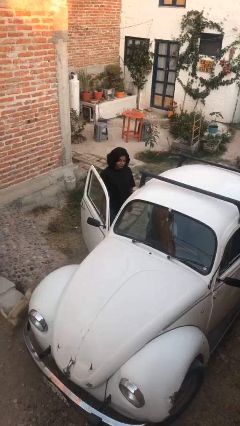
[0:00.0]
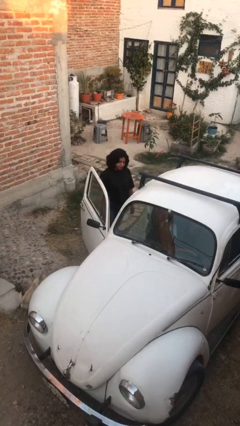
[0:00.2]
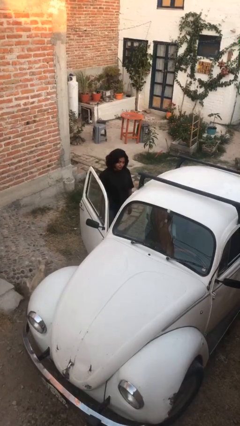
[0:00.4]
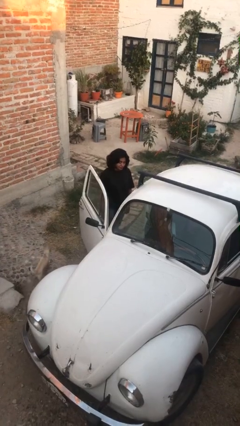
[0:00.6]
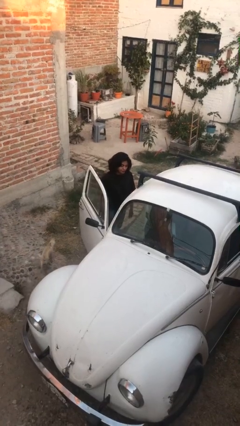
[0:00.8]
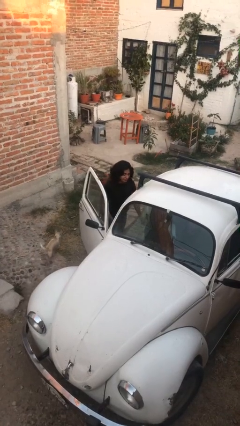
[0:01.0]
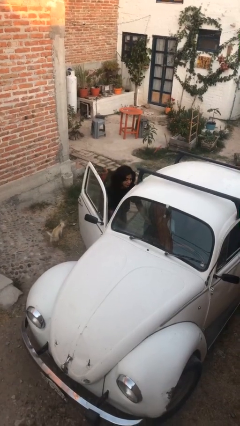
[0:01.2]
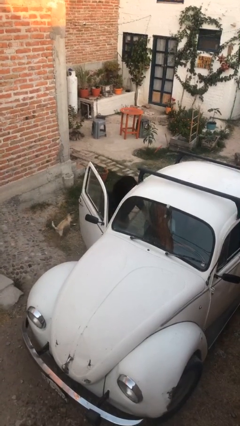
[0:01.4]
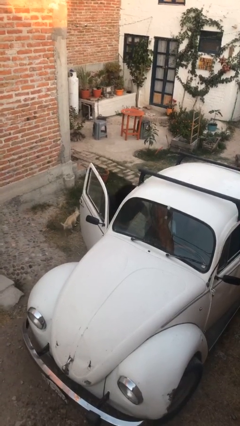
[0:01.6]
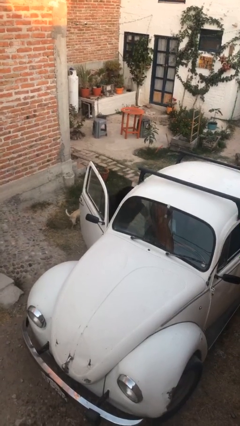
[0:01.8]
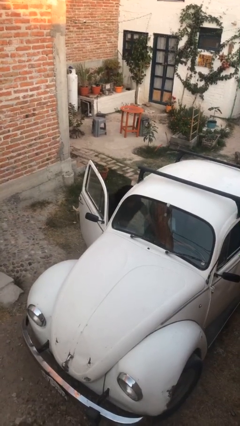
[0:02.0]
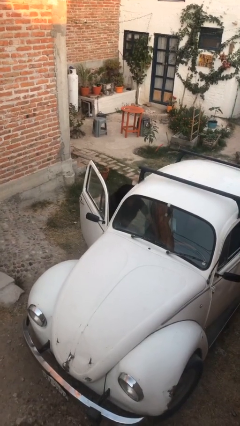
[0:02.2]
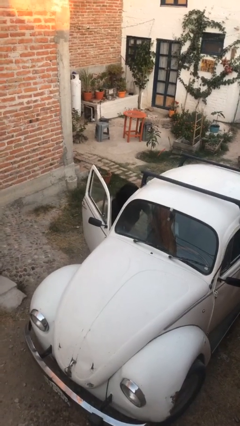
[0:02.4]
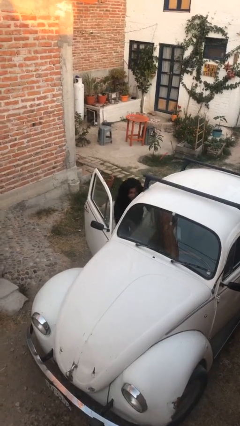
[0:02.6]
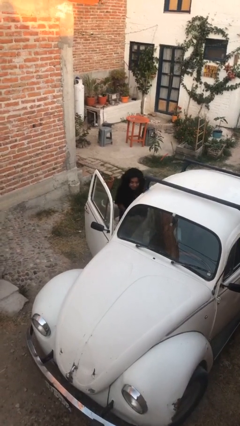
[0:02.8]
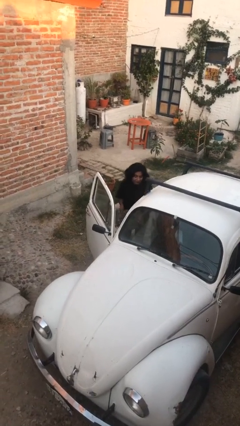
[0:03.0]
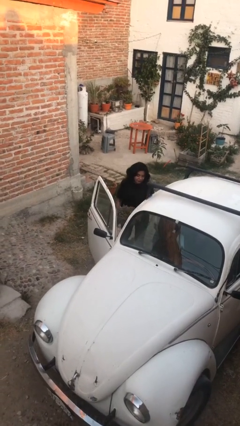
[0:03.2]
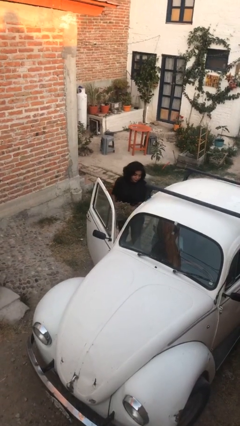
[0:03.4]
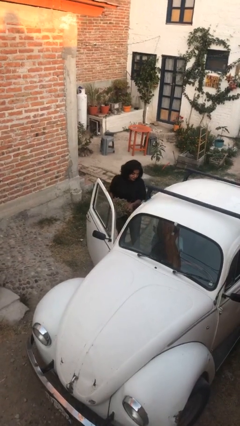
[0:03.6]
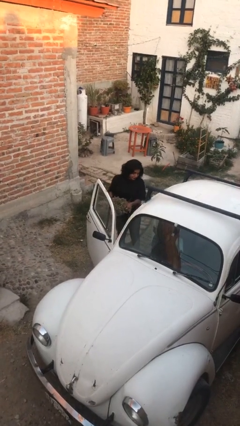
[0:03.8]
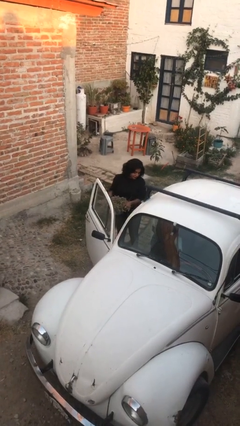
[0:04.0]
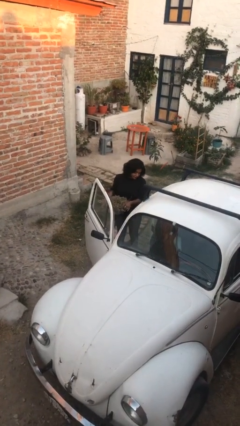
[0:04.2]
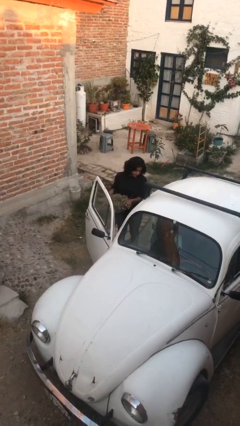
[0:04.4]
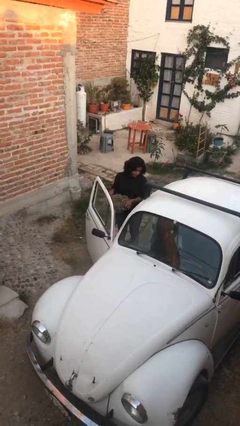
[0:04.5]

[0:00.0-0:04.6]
person unloads car

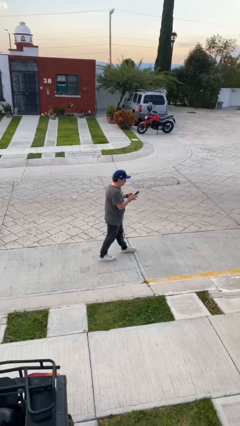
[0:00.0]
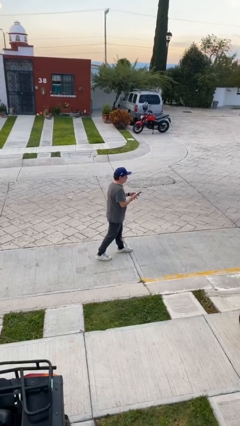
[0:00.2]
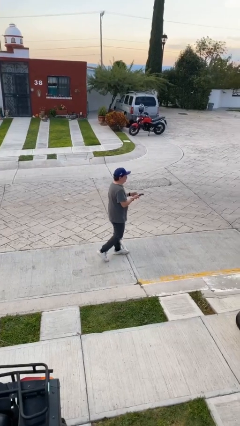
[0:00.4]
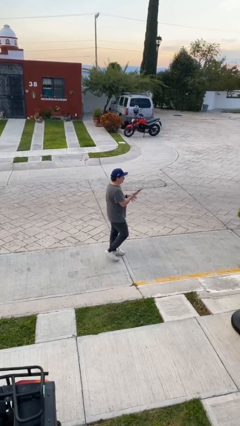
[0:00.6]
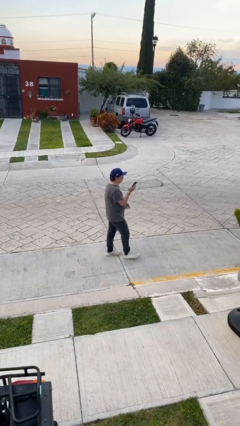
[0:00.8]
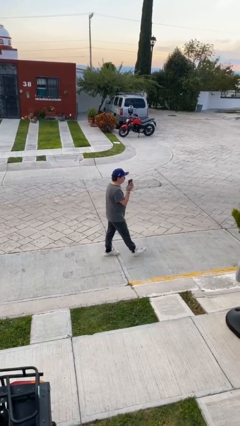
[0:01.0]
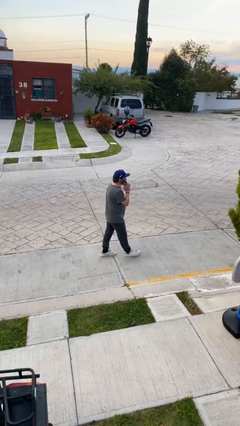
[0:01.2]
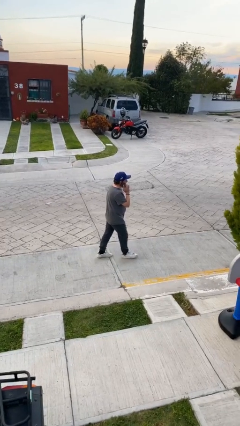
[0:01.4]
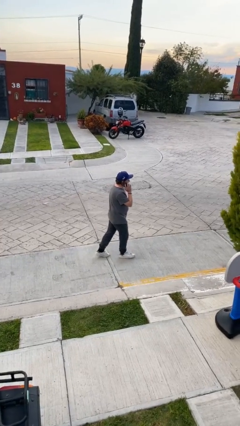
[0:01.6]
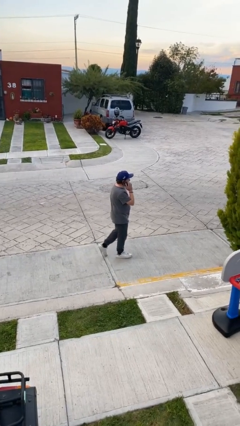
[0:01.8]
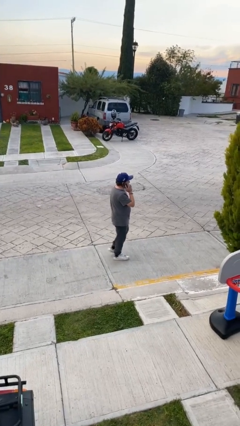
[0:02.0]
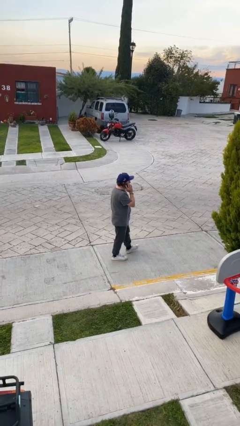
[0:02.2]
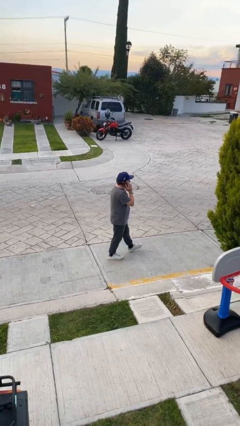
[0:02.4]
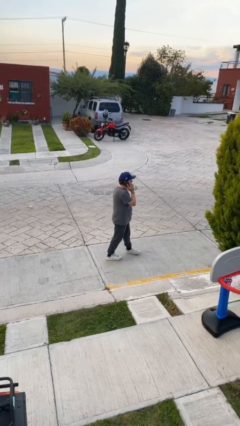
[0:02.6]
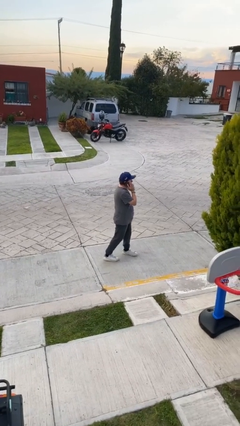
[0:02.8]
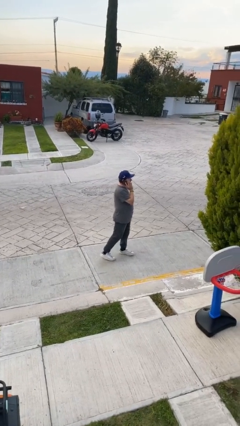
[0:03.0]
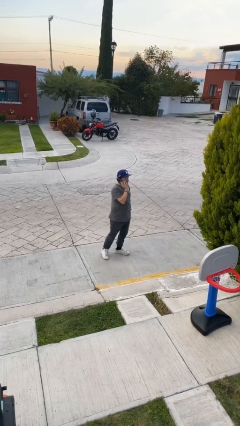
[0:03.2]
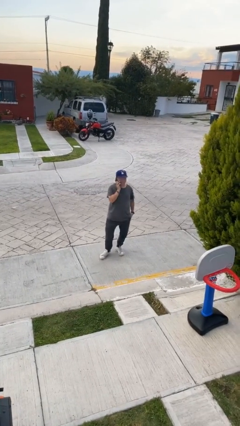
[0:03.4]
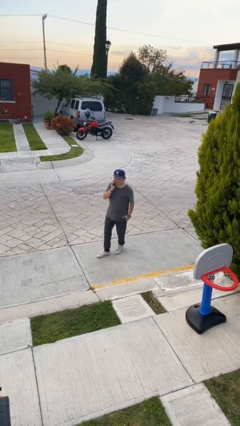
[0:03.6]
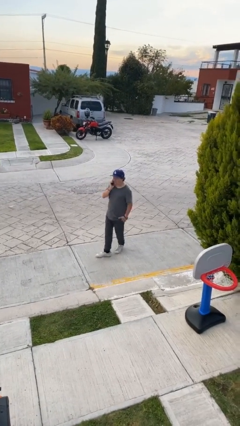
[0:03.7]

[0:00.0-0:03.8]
person talks on phone

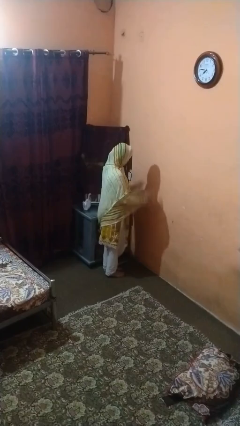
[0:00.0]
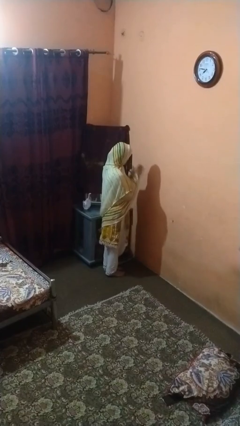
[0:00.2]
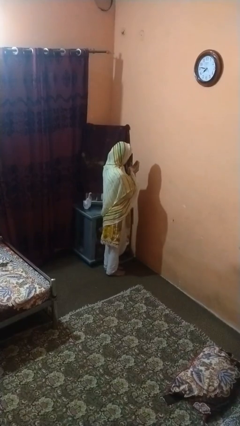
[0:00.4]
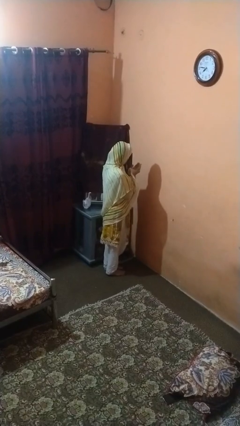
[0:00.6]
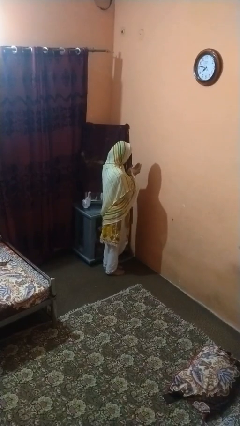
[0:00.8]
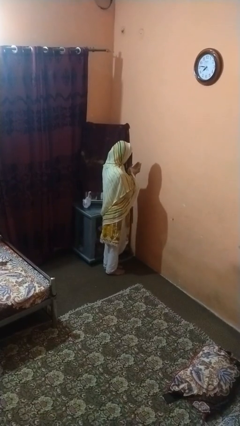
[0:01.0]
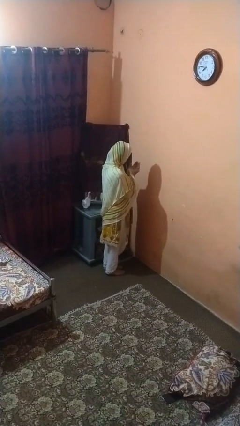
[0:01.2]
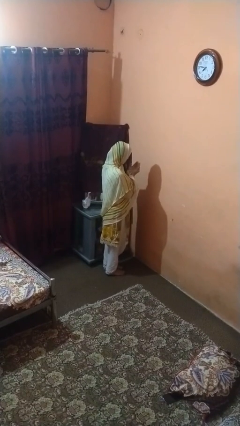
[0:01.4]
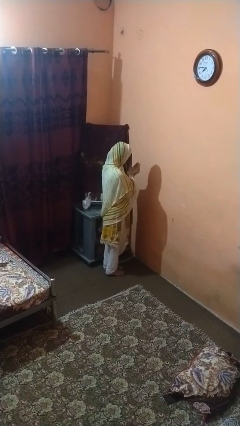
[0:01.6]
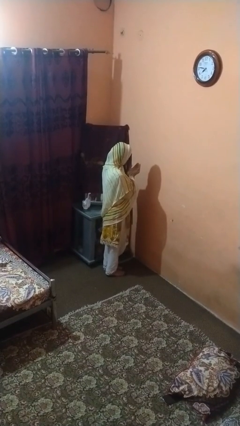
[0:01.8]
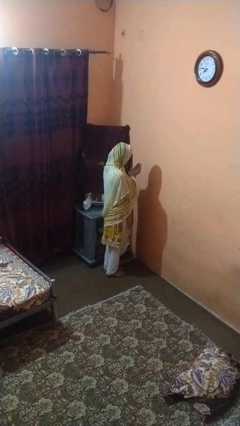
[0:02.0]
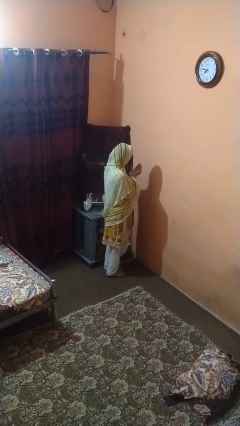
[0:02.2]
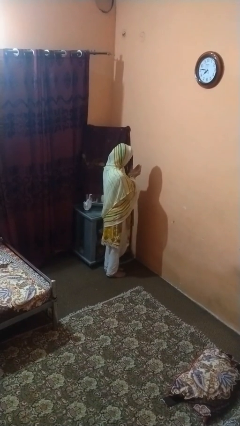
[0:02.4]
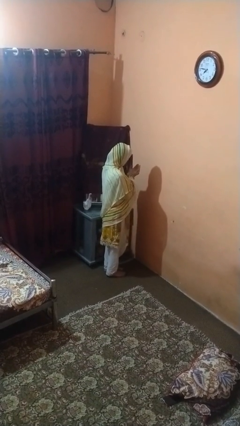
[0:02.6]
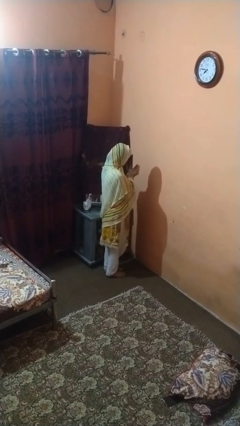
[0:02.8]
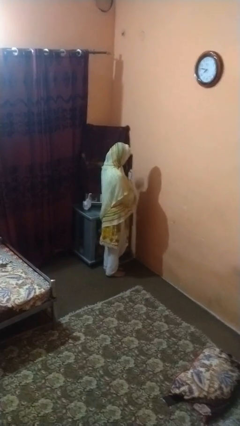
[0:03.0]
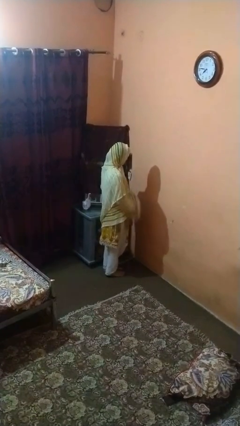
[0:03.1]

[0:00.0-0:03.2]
person prays

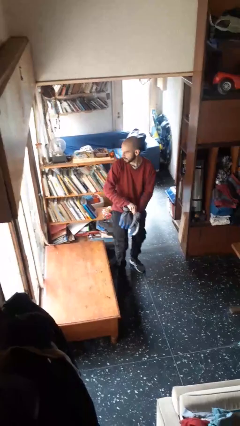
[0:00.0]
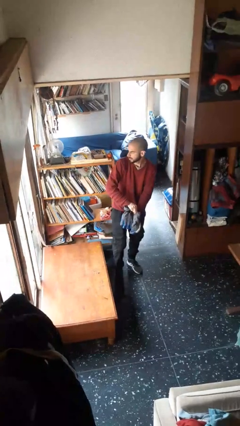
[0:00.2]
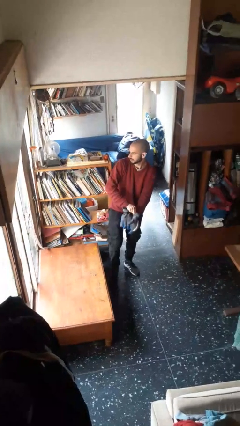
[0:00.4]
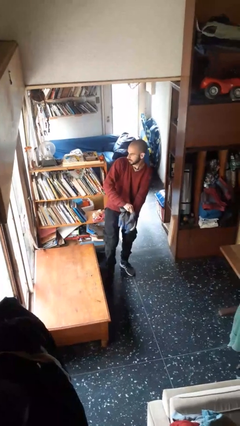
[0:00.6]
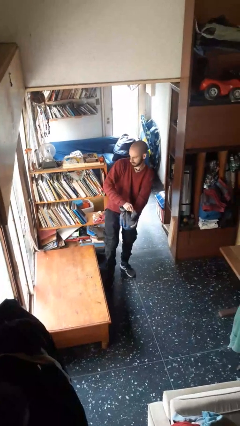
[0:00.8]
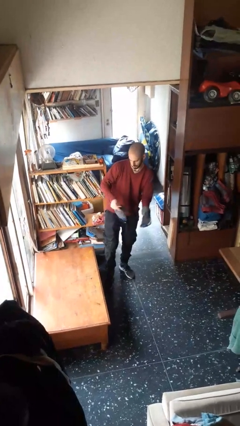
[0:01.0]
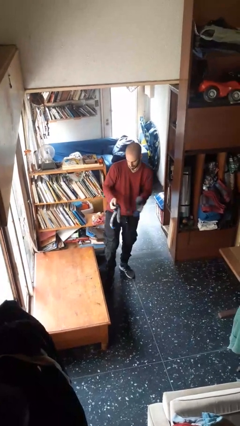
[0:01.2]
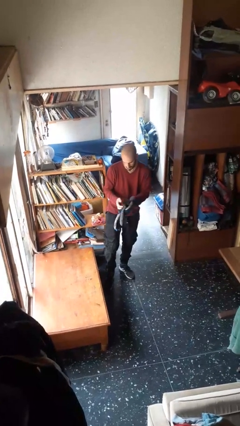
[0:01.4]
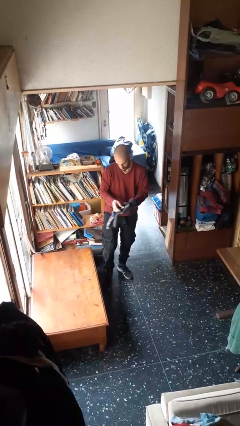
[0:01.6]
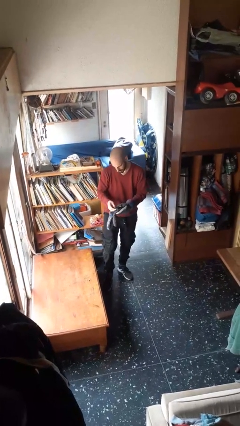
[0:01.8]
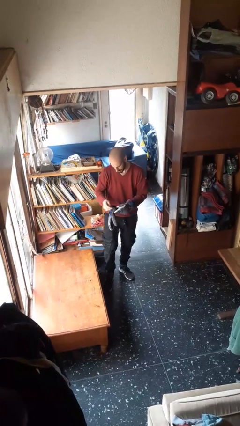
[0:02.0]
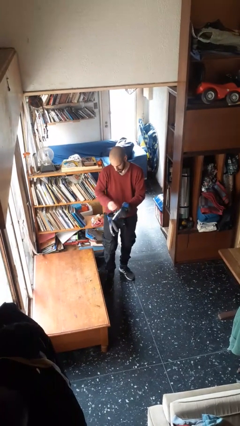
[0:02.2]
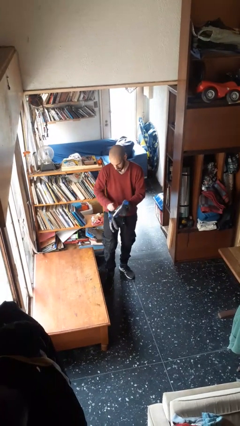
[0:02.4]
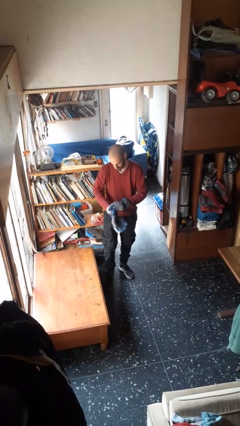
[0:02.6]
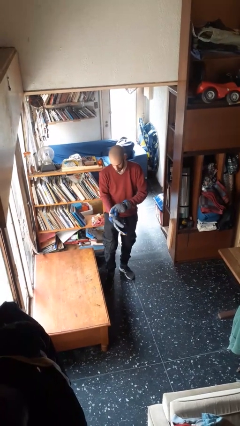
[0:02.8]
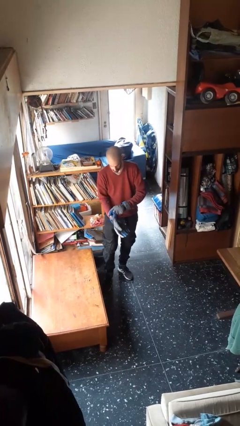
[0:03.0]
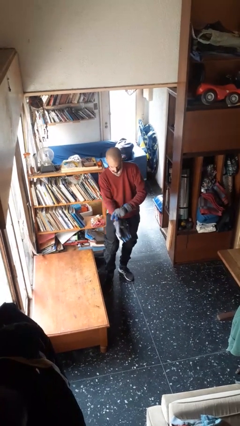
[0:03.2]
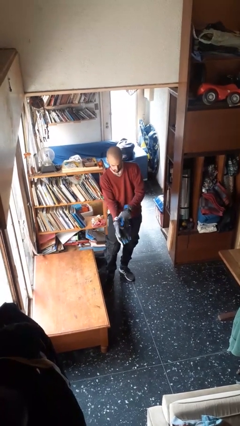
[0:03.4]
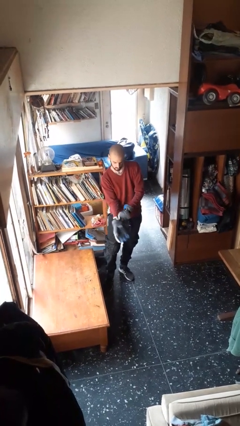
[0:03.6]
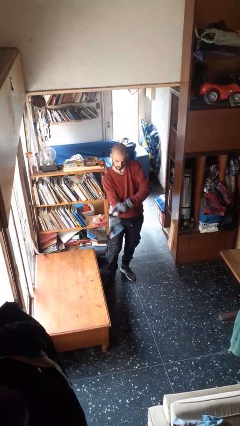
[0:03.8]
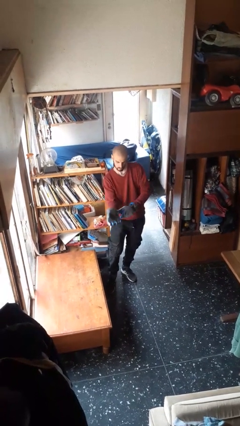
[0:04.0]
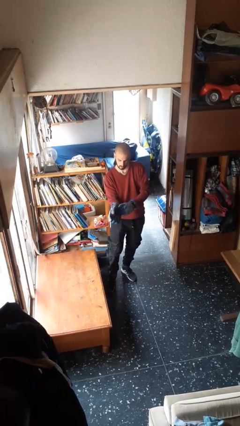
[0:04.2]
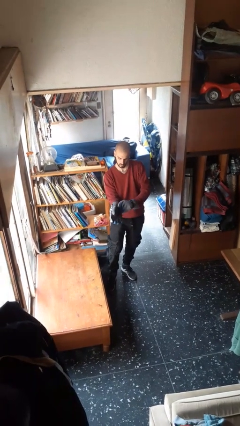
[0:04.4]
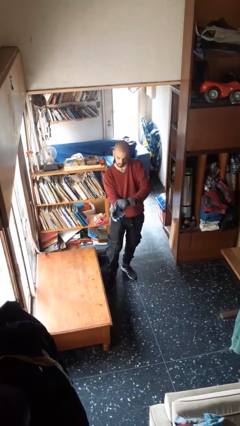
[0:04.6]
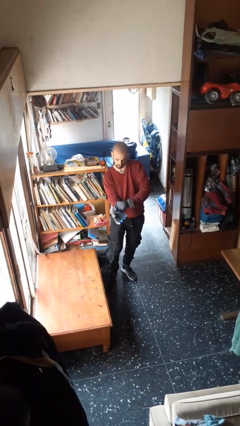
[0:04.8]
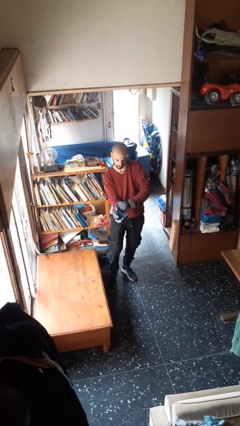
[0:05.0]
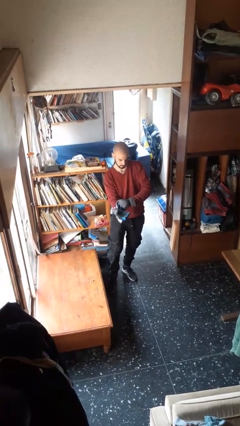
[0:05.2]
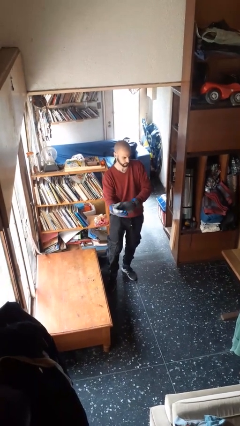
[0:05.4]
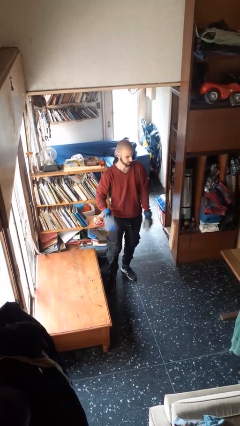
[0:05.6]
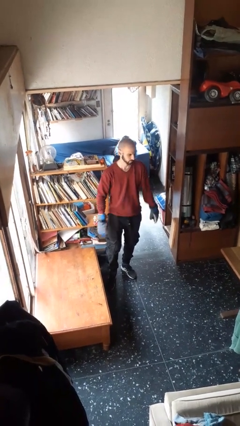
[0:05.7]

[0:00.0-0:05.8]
person puts on gloves
